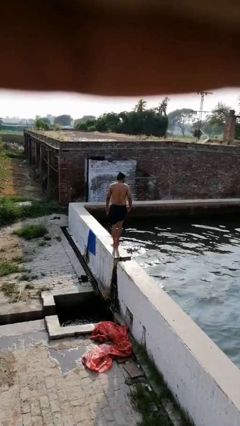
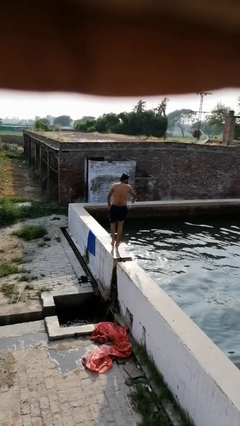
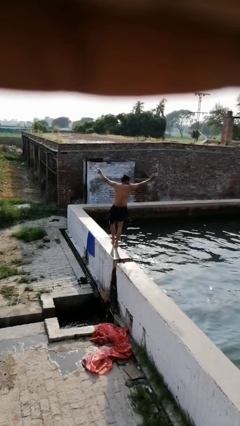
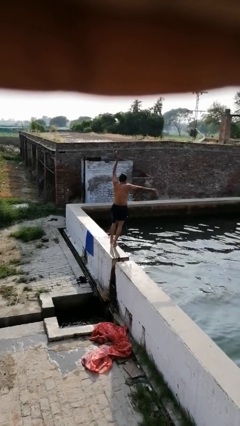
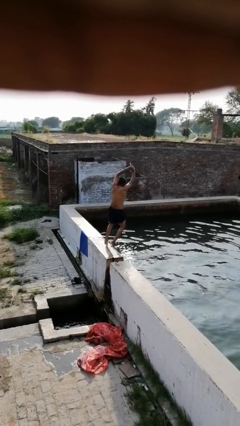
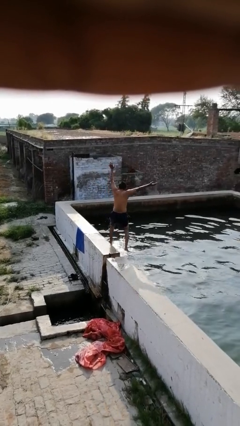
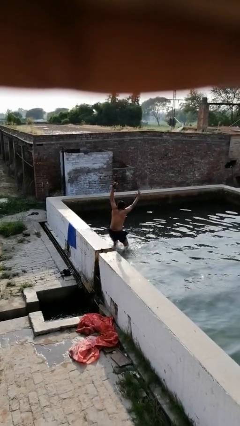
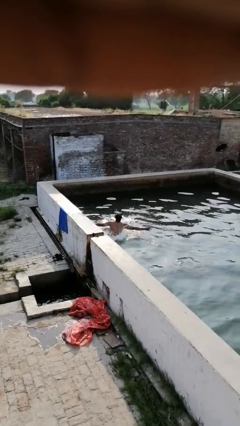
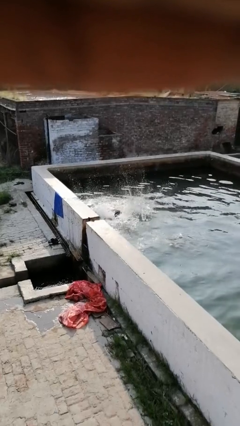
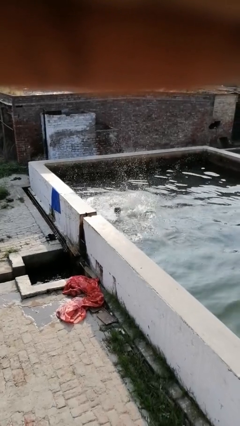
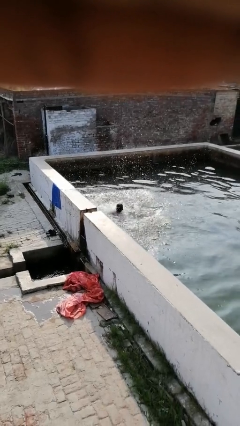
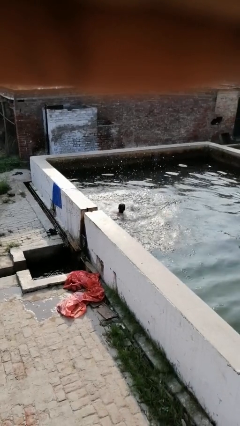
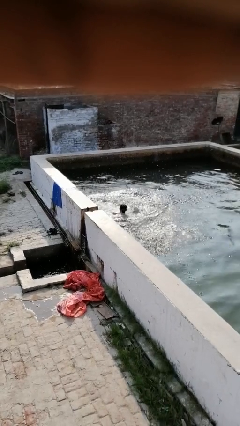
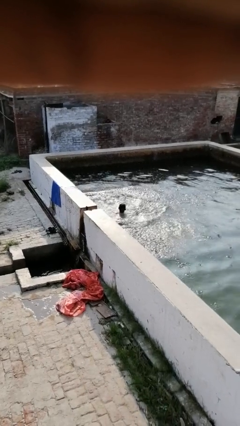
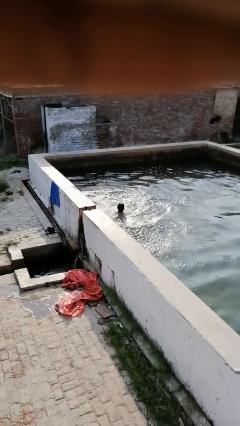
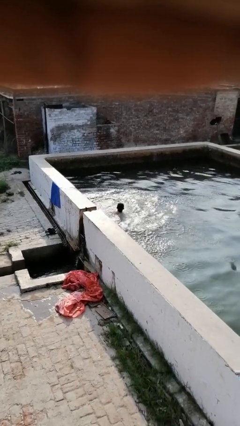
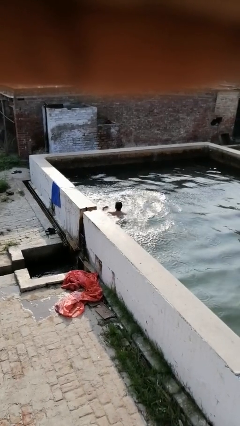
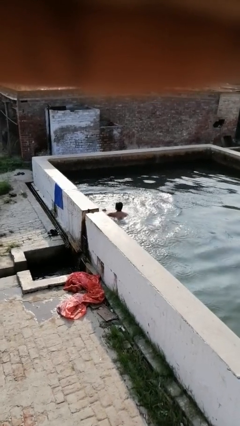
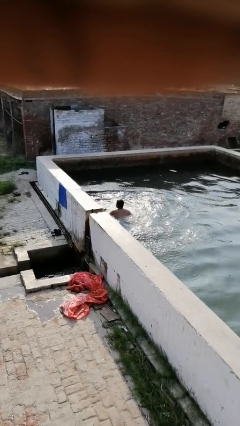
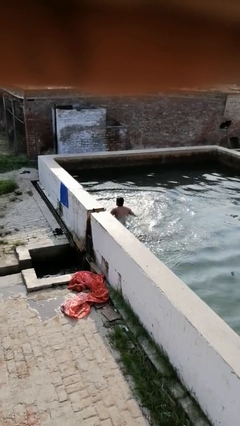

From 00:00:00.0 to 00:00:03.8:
person falls into pool

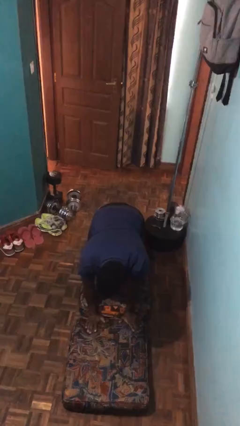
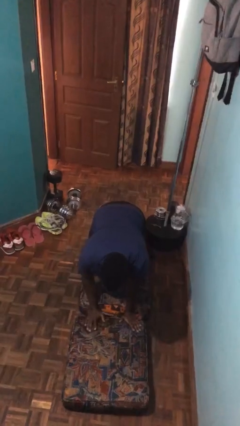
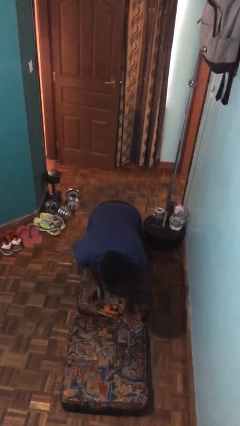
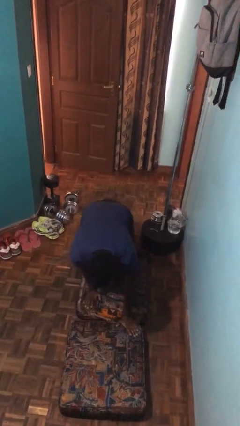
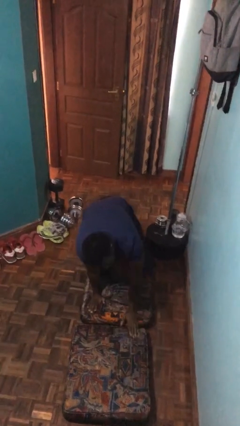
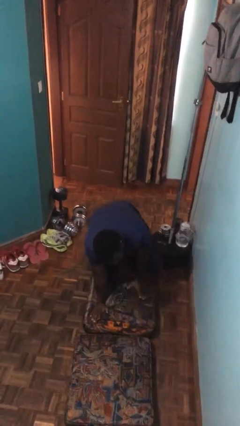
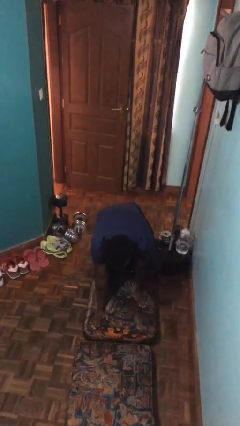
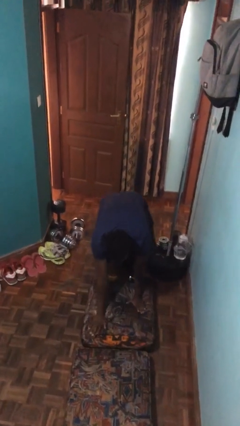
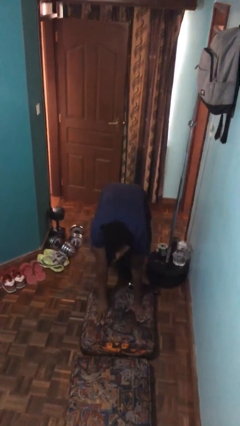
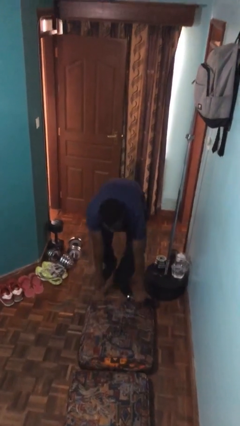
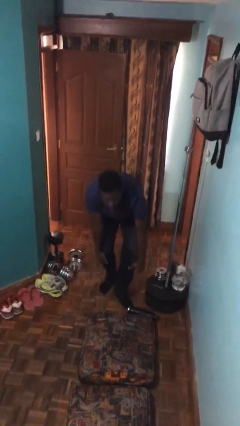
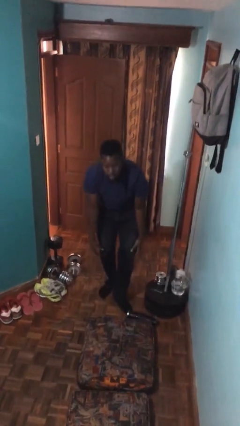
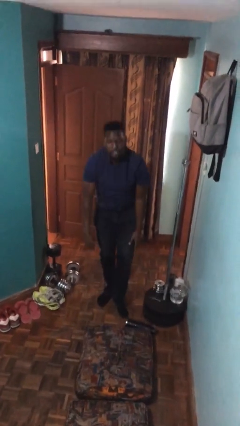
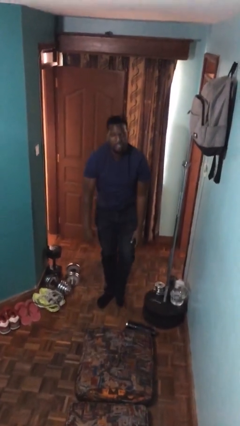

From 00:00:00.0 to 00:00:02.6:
person stands up from floor

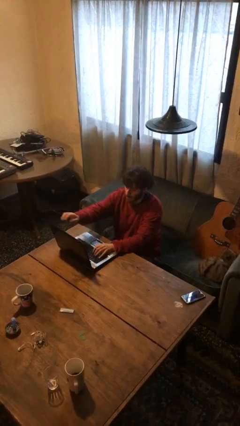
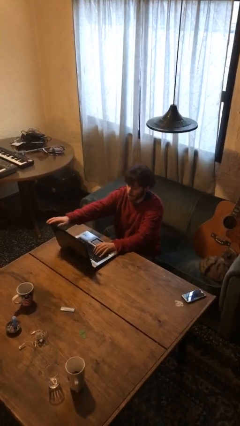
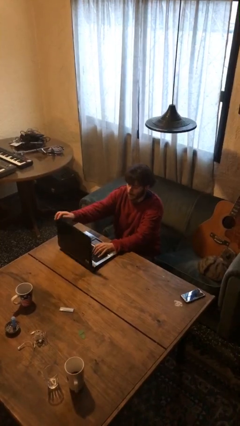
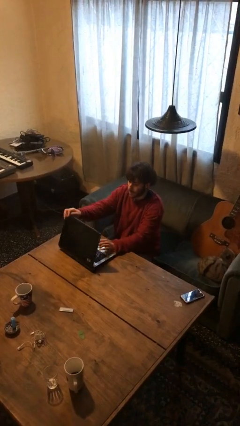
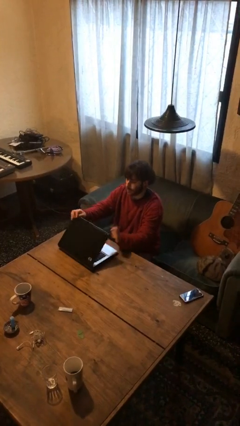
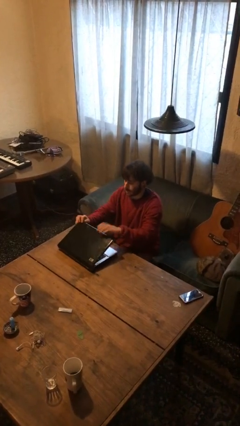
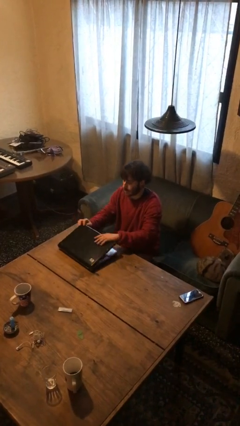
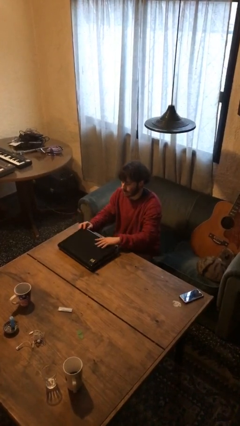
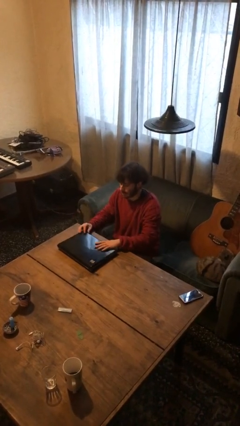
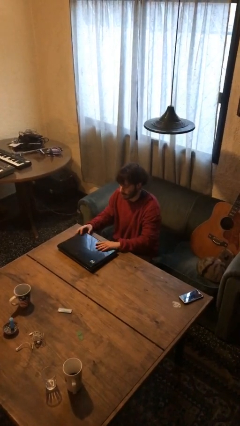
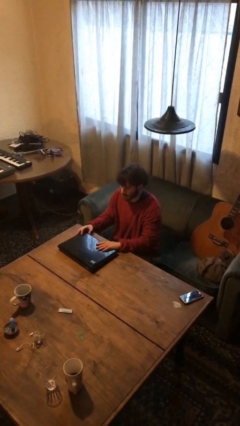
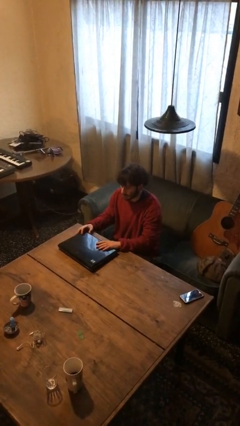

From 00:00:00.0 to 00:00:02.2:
person closes laptop

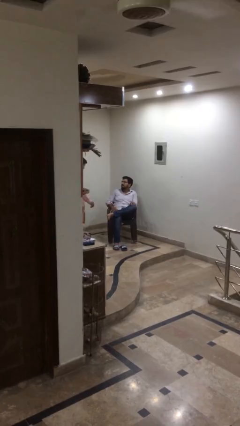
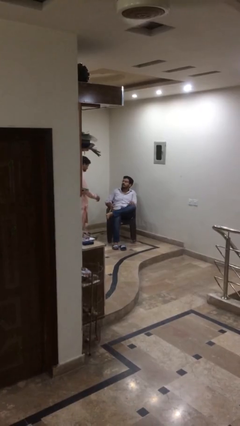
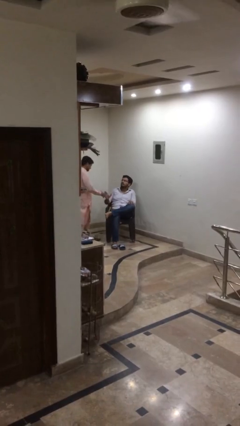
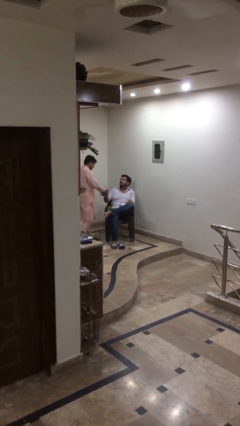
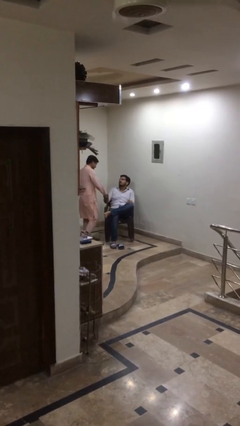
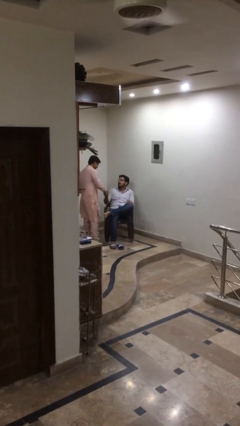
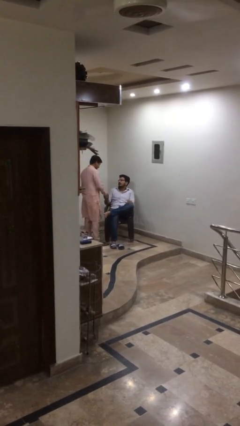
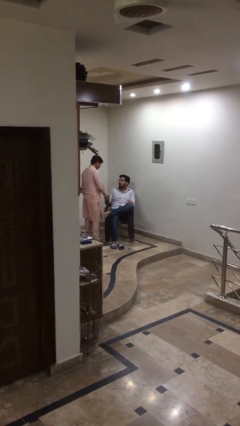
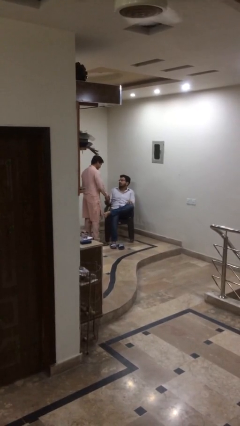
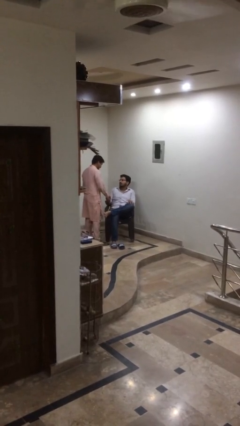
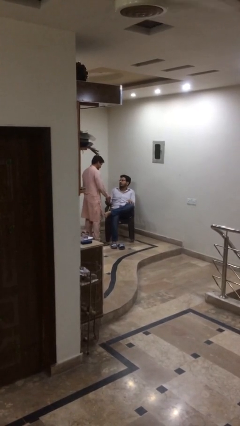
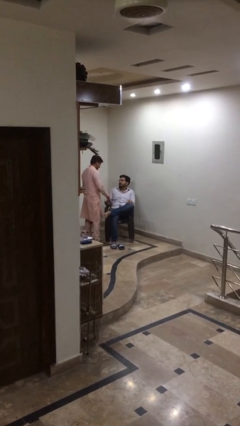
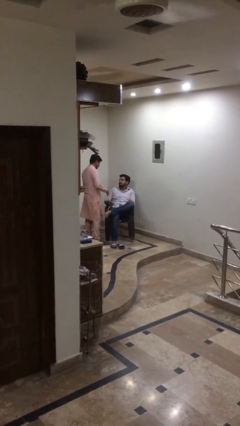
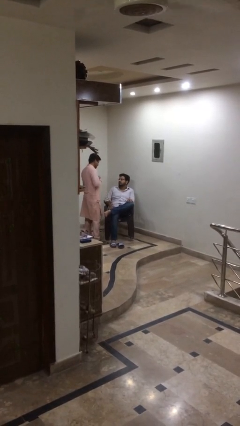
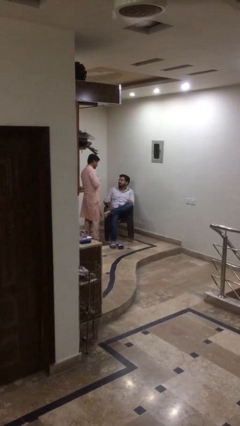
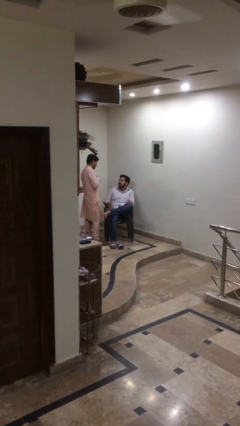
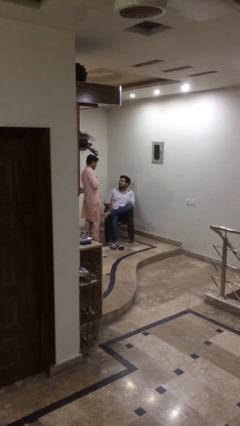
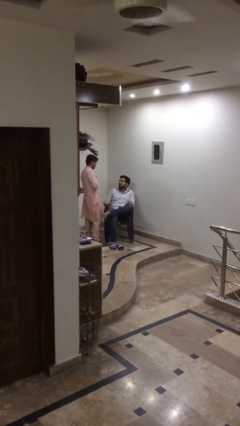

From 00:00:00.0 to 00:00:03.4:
person shakes hand

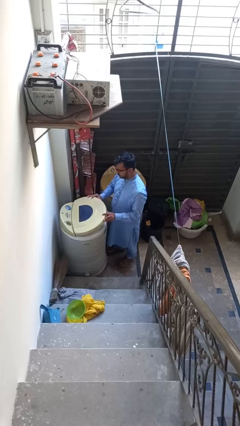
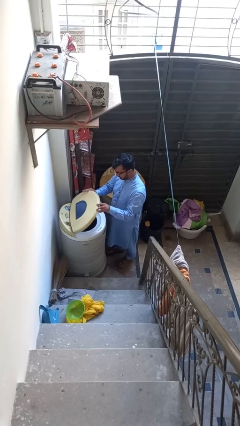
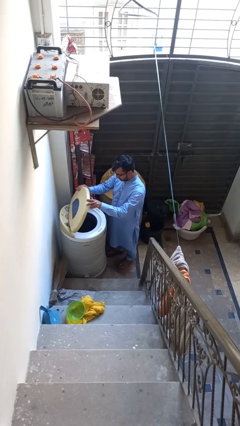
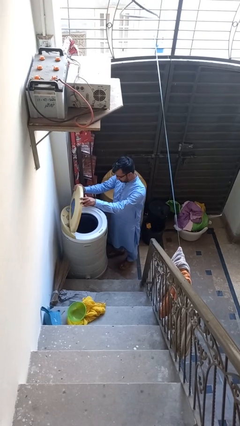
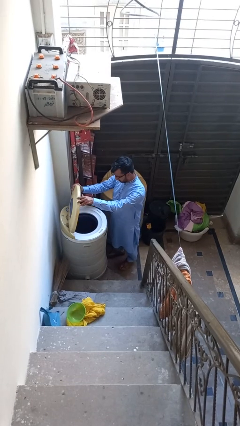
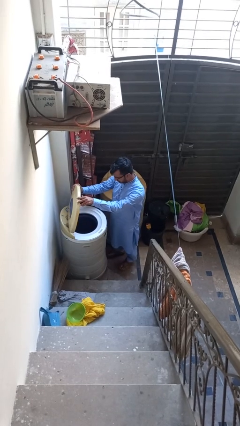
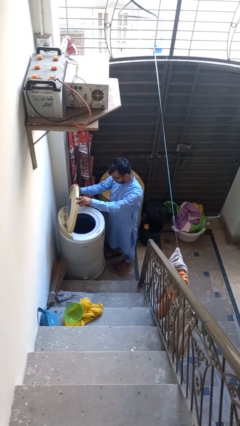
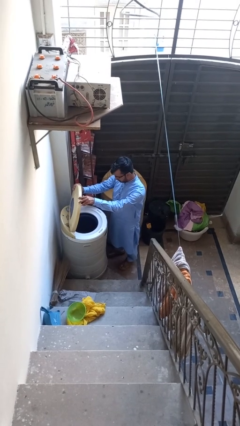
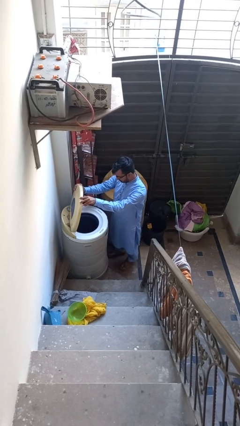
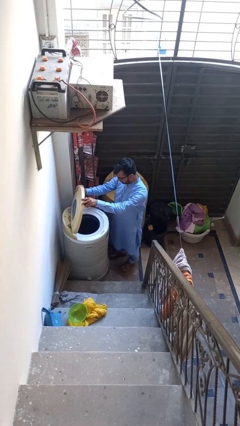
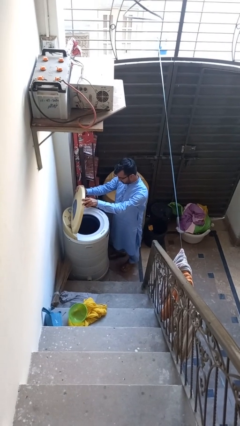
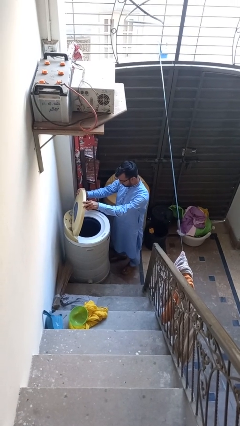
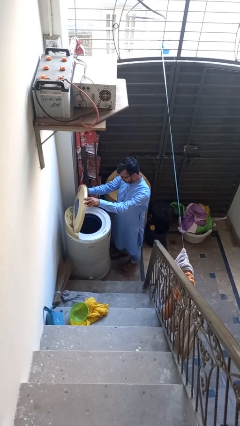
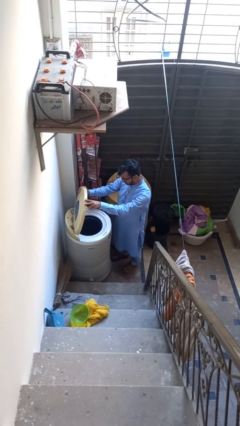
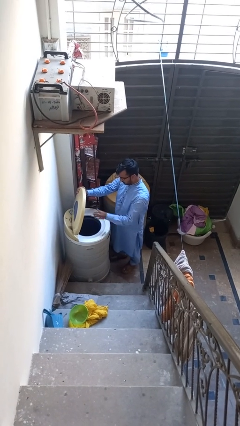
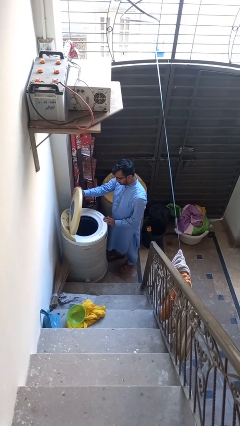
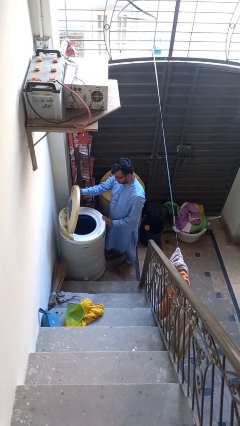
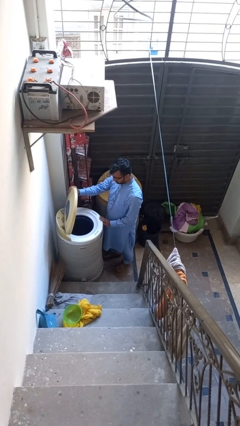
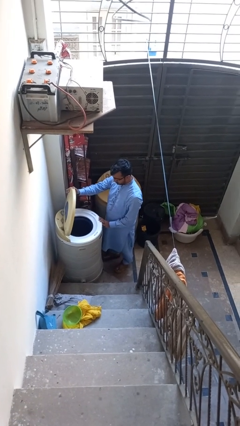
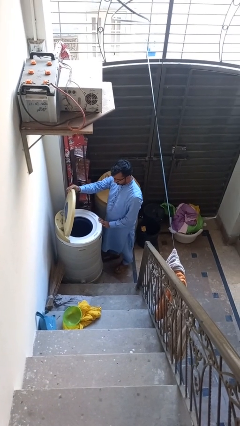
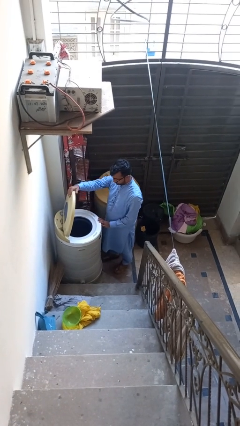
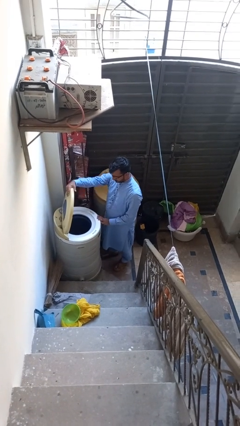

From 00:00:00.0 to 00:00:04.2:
person opens clothes washer

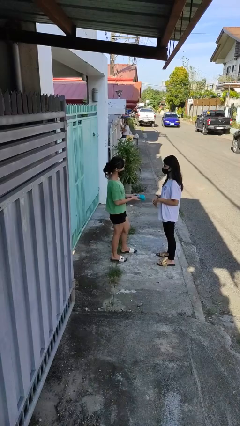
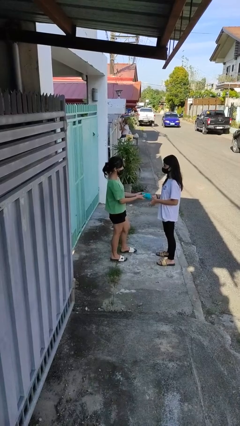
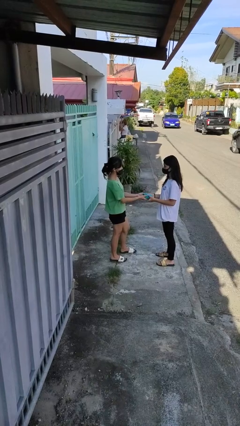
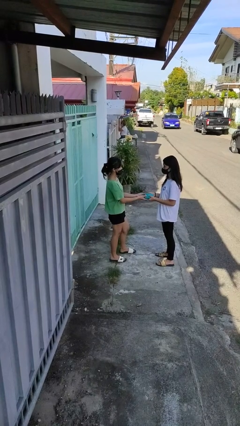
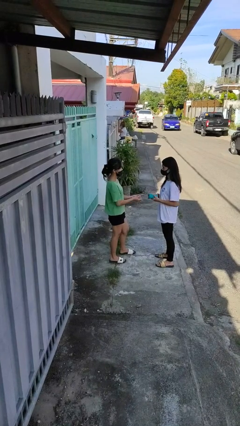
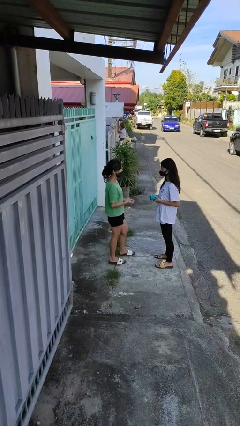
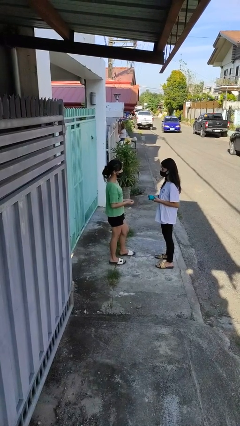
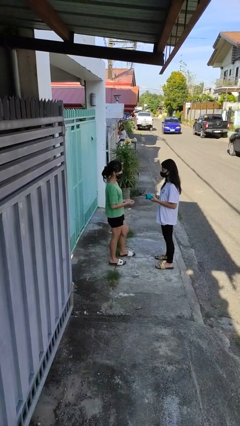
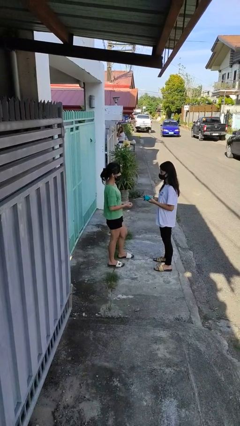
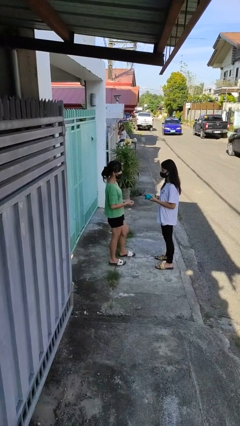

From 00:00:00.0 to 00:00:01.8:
person transfers object to person
